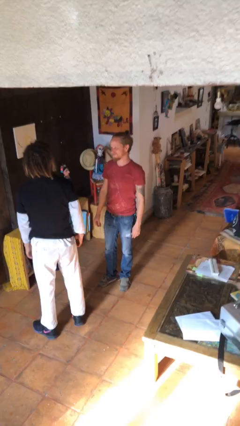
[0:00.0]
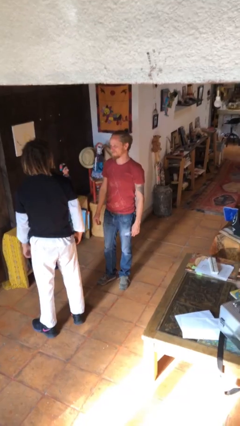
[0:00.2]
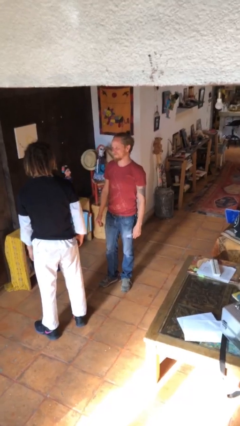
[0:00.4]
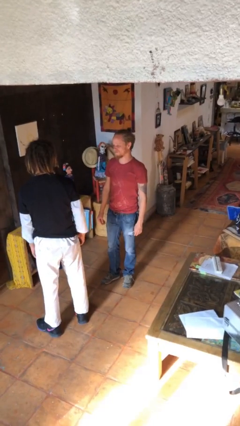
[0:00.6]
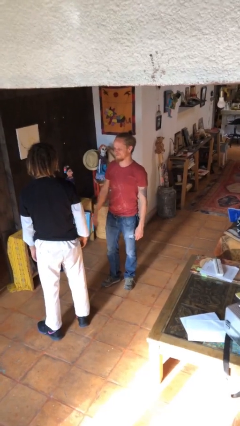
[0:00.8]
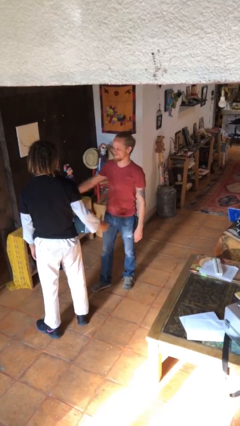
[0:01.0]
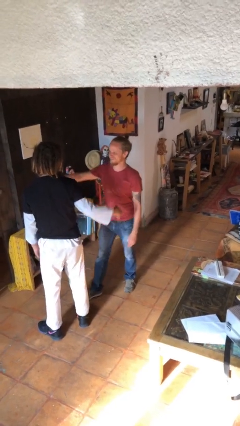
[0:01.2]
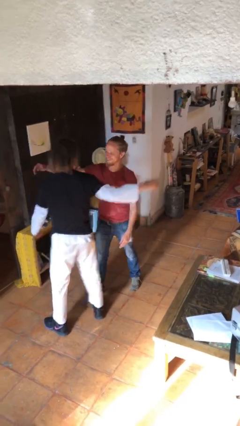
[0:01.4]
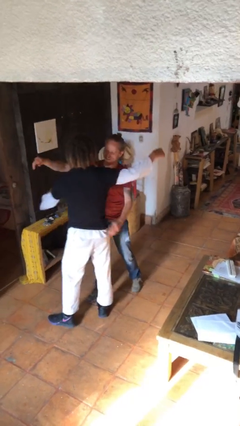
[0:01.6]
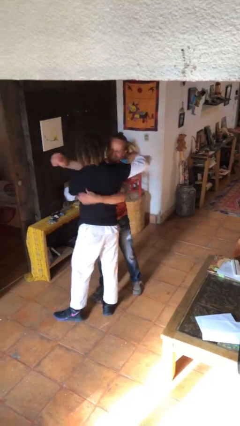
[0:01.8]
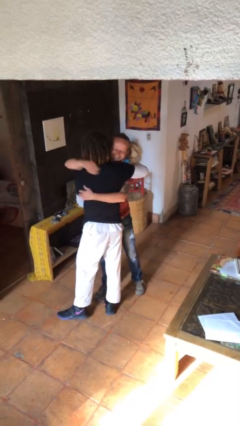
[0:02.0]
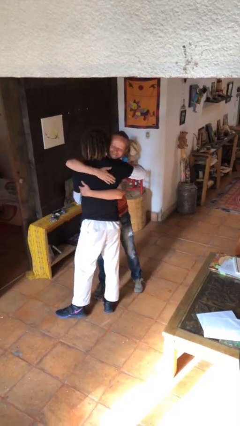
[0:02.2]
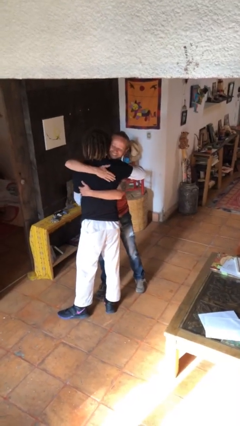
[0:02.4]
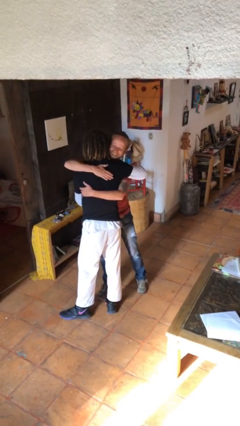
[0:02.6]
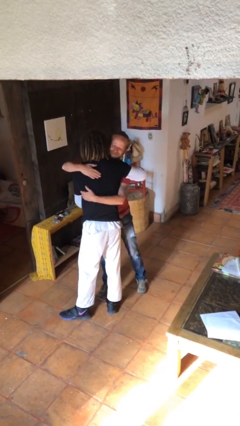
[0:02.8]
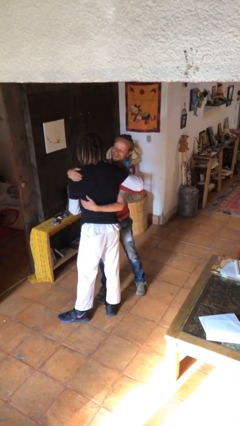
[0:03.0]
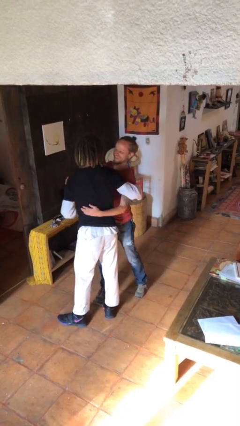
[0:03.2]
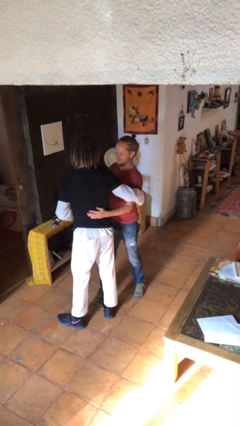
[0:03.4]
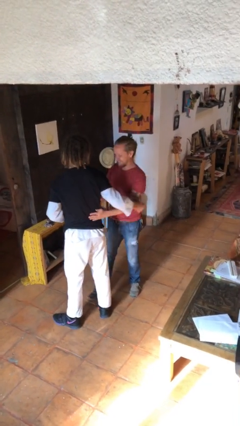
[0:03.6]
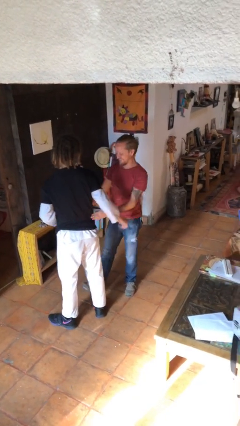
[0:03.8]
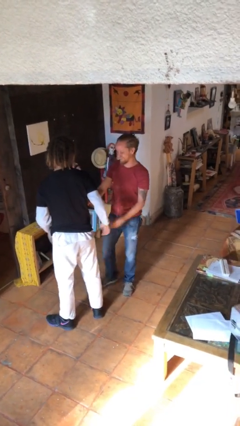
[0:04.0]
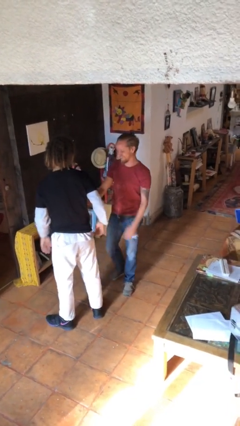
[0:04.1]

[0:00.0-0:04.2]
person embraces person

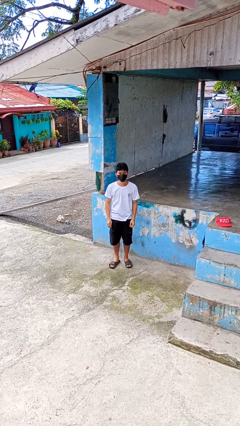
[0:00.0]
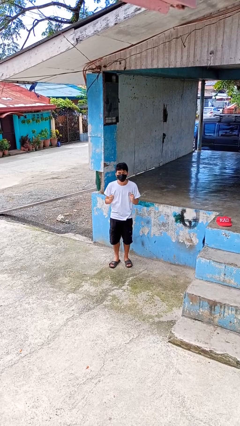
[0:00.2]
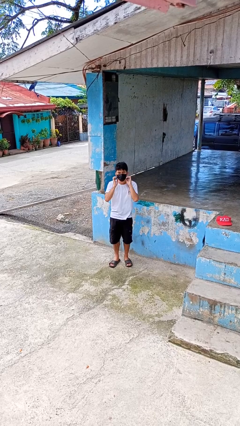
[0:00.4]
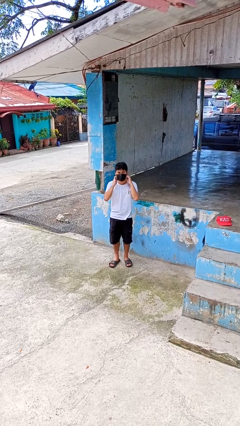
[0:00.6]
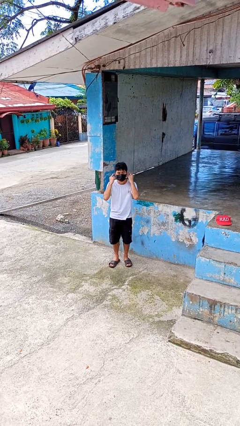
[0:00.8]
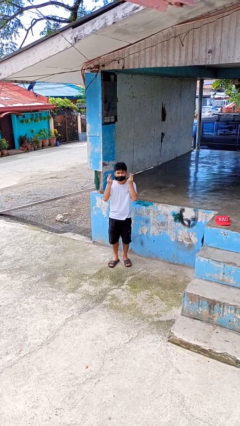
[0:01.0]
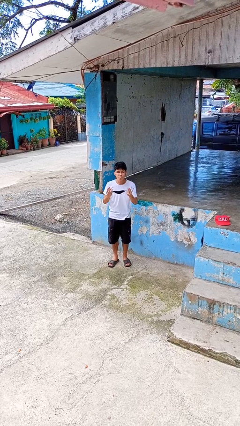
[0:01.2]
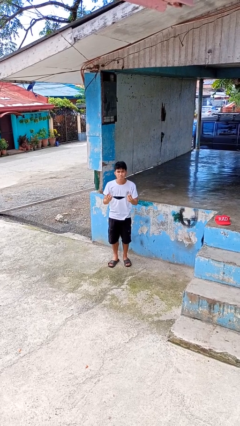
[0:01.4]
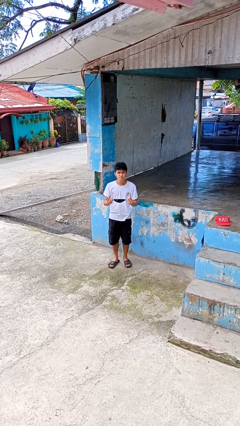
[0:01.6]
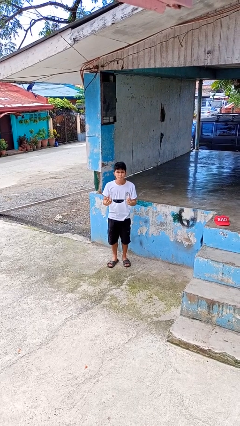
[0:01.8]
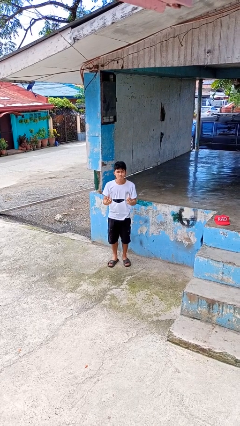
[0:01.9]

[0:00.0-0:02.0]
person takes off facemask

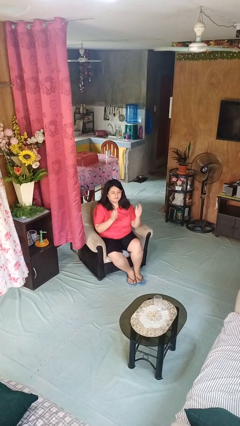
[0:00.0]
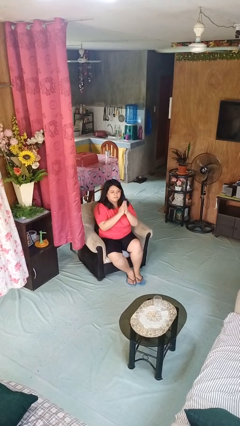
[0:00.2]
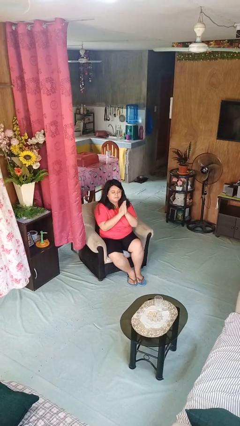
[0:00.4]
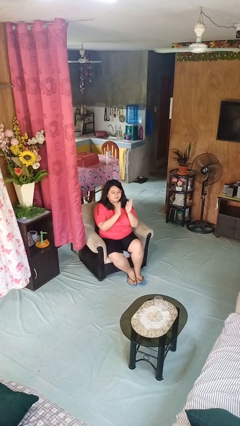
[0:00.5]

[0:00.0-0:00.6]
person claps hands

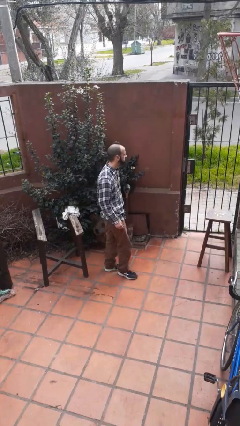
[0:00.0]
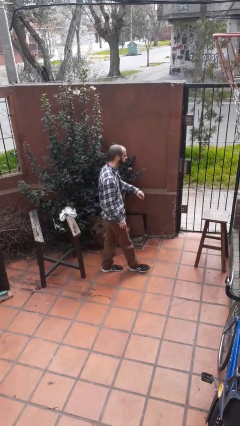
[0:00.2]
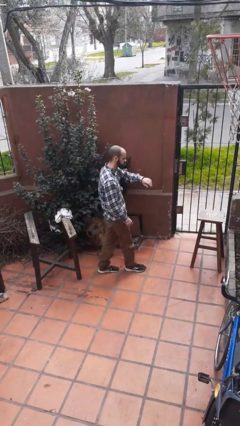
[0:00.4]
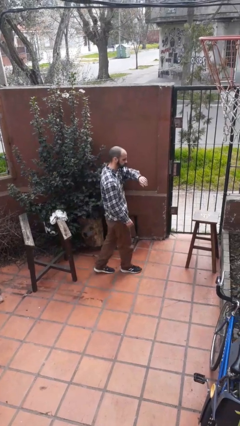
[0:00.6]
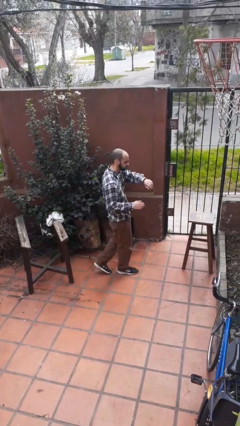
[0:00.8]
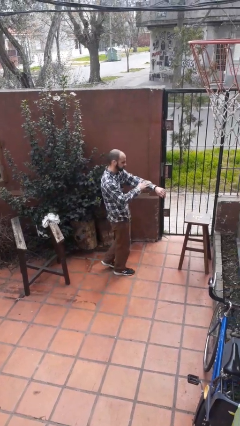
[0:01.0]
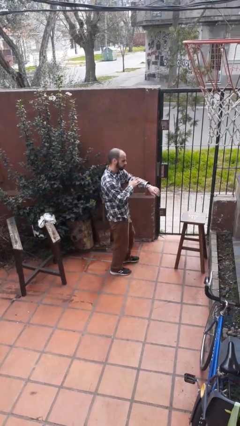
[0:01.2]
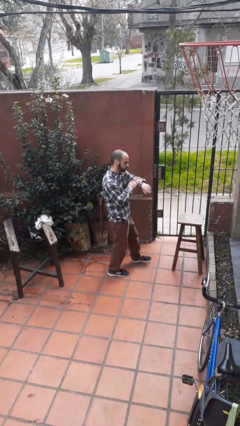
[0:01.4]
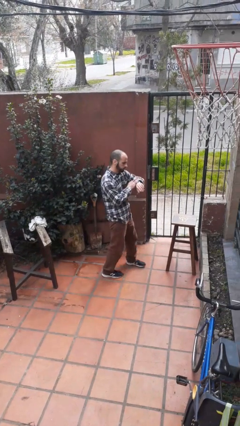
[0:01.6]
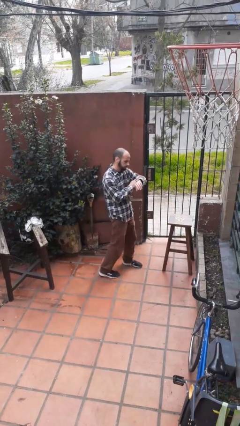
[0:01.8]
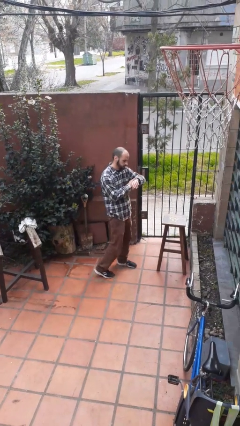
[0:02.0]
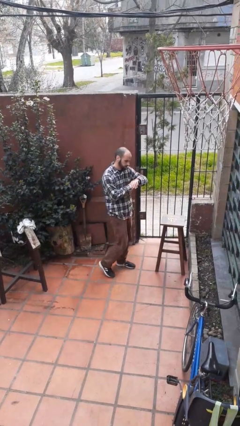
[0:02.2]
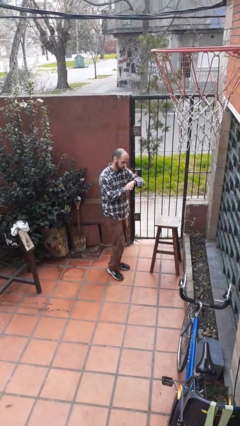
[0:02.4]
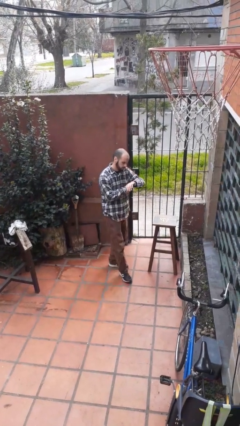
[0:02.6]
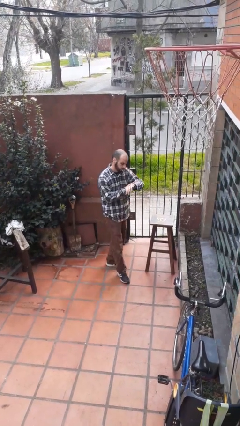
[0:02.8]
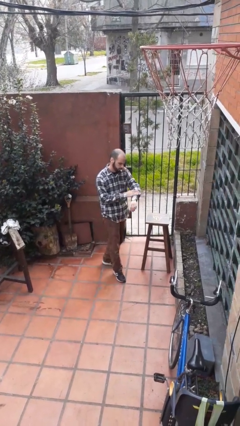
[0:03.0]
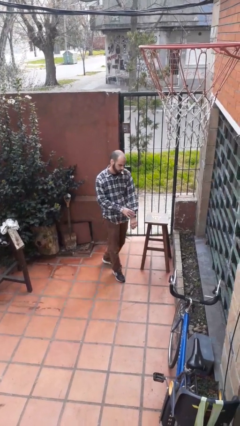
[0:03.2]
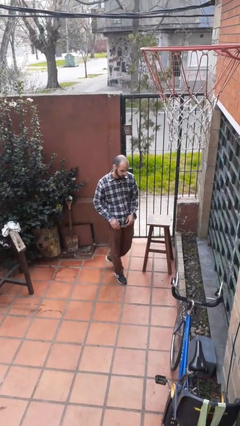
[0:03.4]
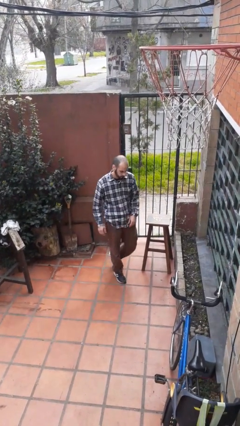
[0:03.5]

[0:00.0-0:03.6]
person looks at wristwatch

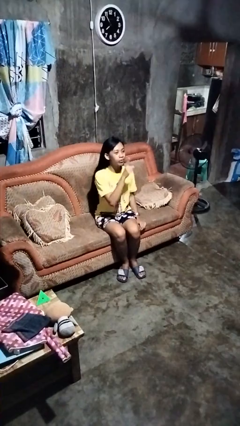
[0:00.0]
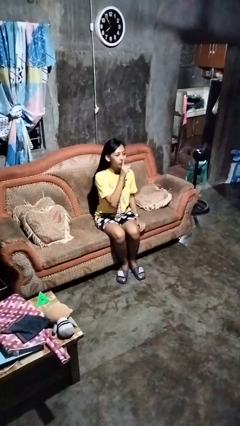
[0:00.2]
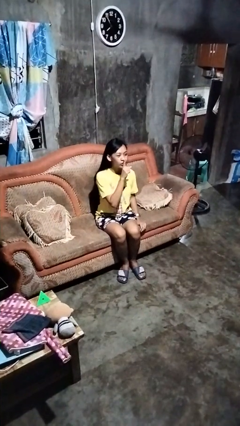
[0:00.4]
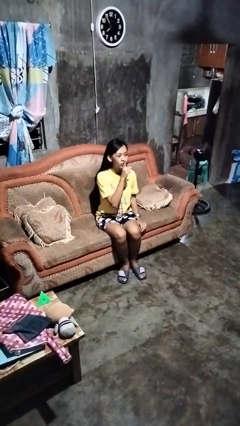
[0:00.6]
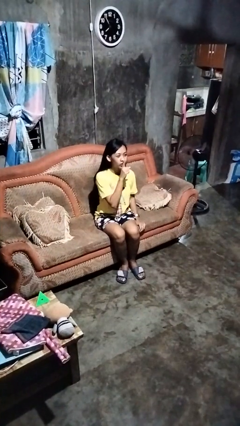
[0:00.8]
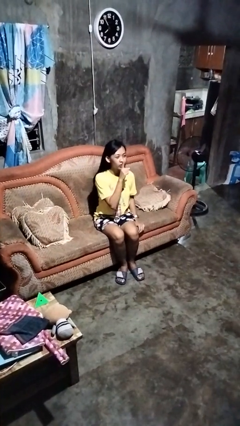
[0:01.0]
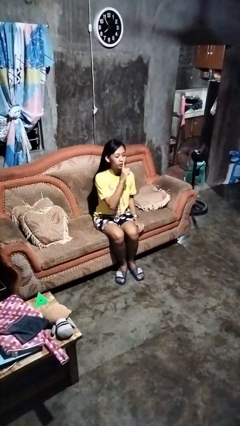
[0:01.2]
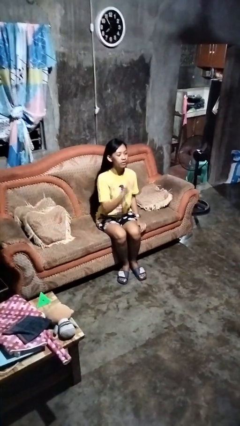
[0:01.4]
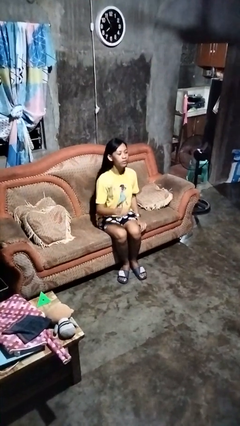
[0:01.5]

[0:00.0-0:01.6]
person gestures be quiet

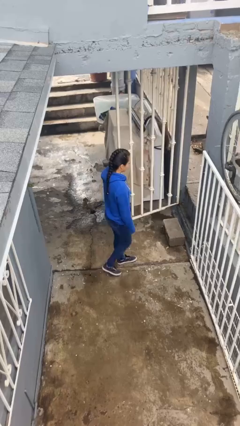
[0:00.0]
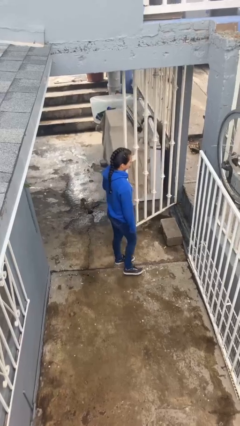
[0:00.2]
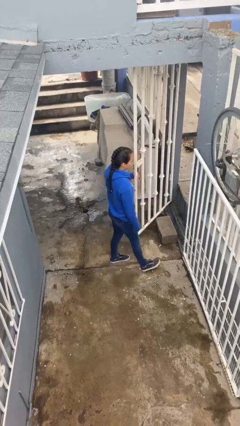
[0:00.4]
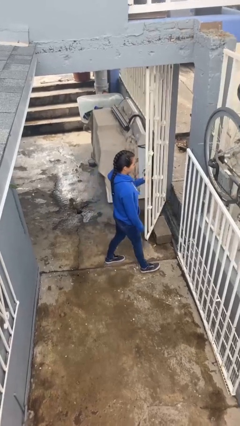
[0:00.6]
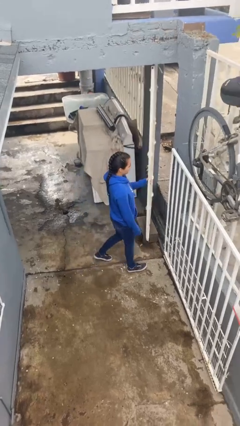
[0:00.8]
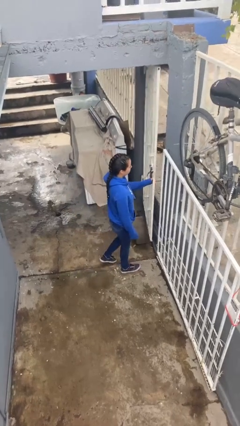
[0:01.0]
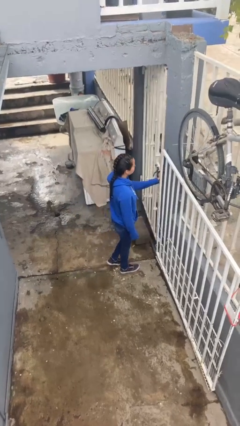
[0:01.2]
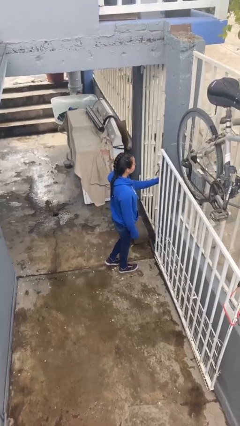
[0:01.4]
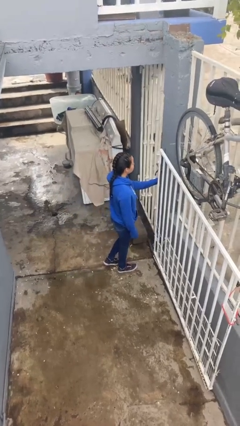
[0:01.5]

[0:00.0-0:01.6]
person closes facility door

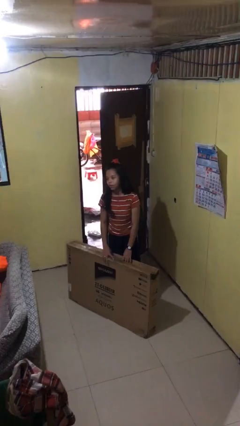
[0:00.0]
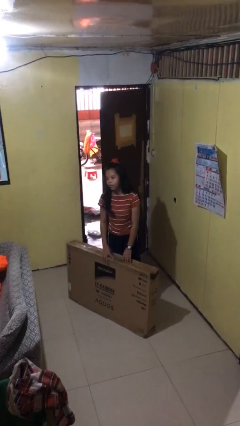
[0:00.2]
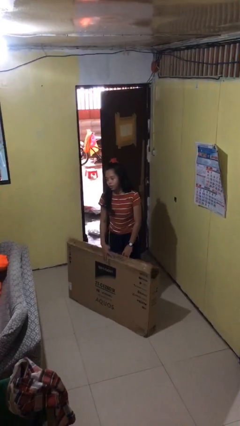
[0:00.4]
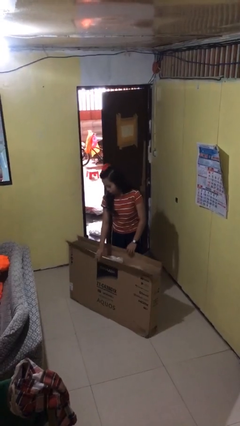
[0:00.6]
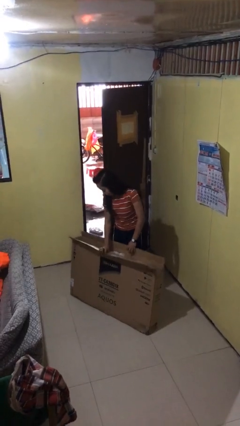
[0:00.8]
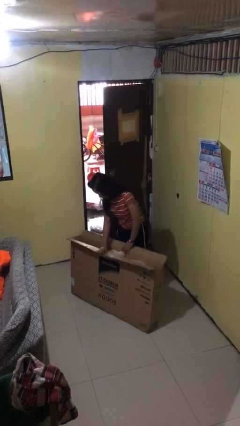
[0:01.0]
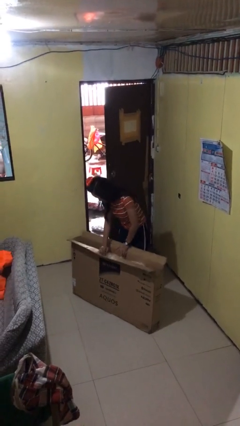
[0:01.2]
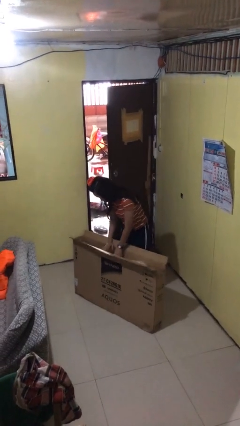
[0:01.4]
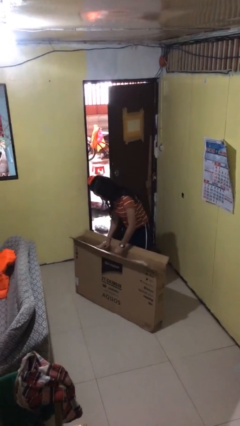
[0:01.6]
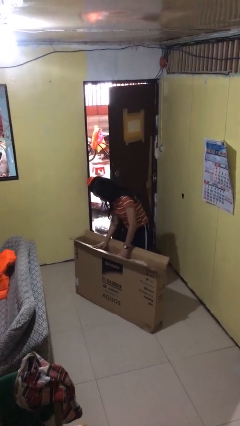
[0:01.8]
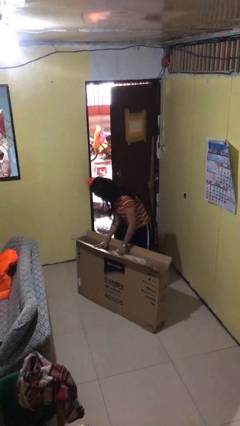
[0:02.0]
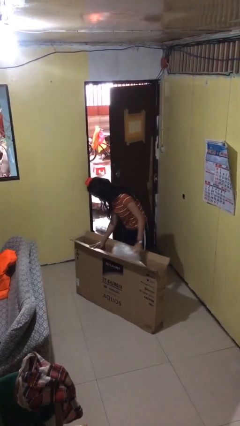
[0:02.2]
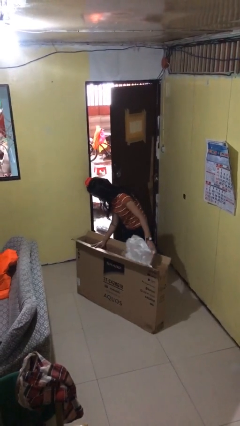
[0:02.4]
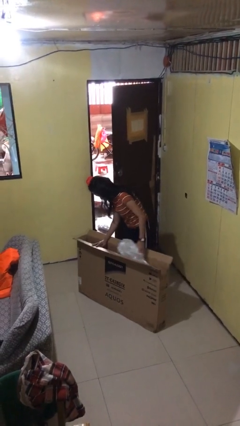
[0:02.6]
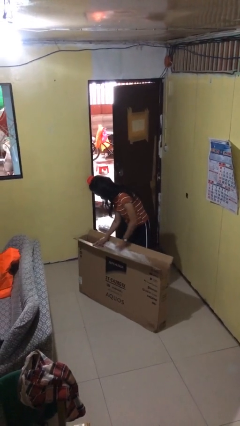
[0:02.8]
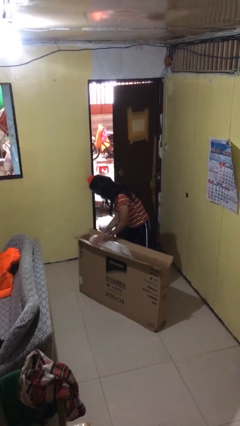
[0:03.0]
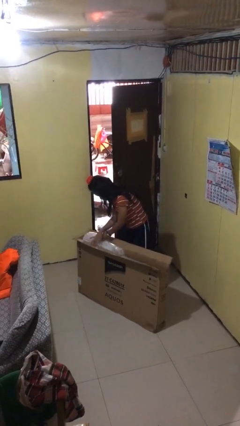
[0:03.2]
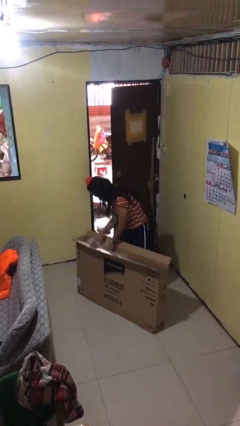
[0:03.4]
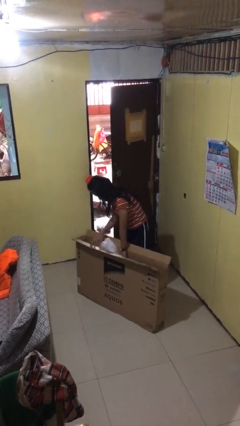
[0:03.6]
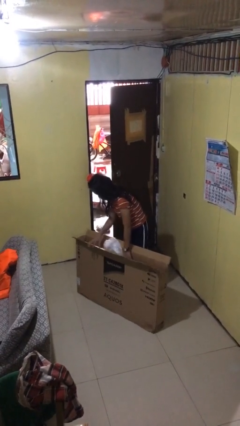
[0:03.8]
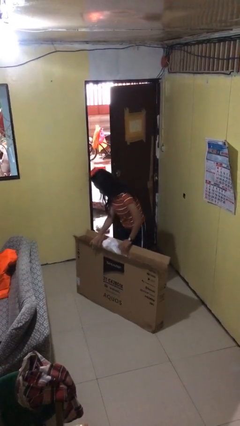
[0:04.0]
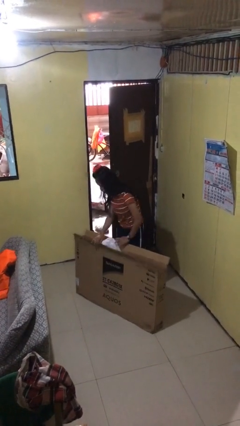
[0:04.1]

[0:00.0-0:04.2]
person searches in box
